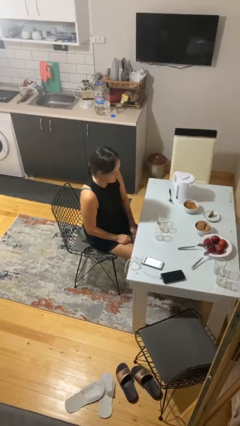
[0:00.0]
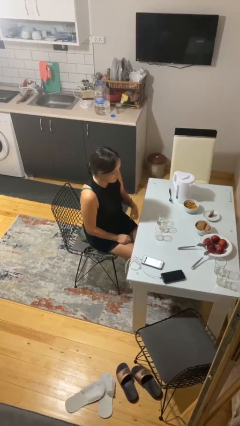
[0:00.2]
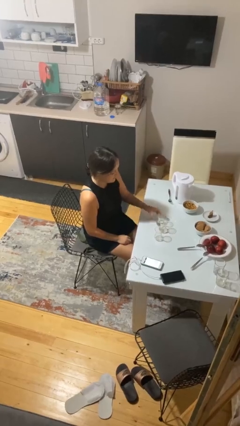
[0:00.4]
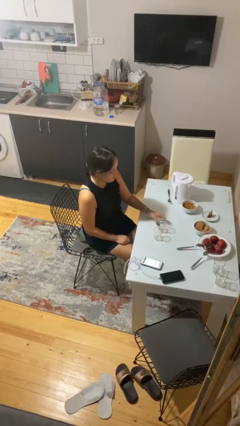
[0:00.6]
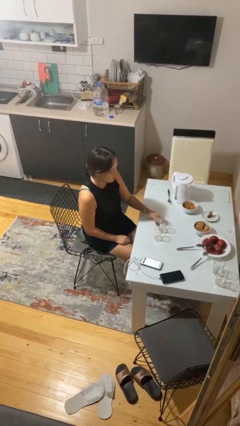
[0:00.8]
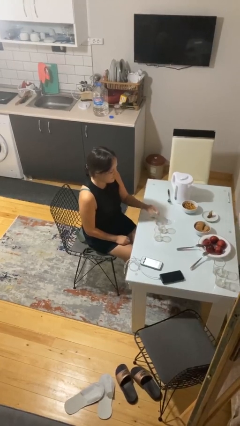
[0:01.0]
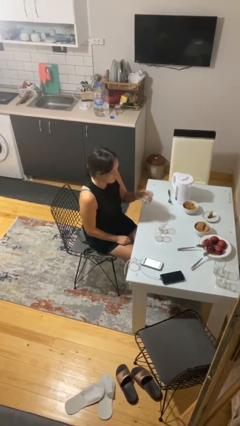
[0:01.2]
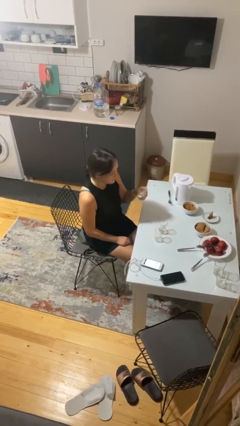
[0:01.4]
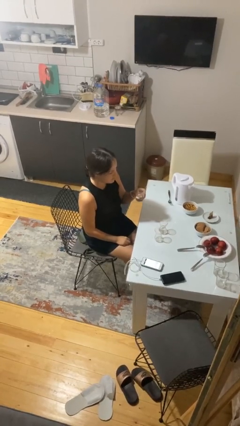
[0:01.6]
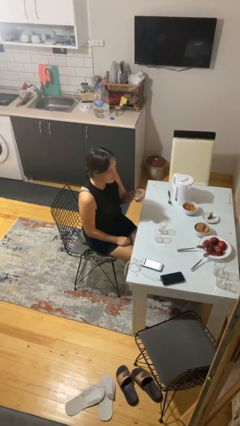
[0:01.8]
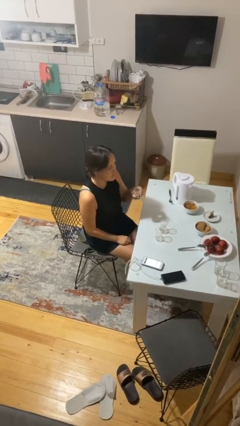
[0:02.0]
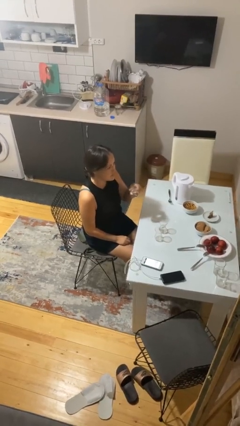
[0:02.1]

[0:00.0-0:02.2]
person picks up object from table

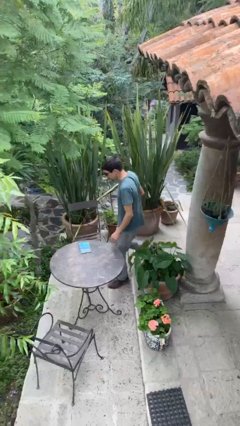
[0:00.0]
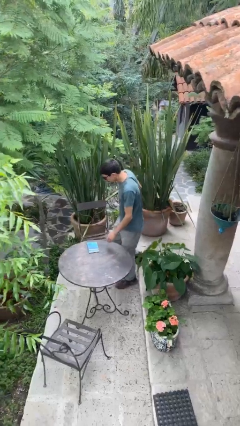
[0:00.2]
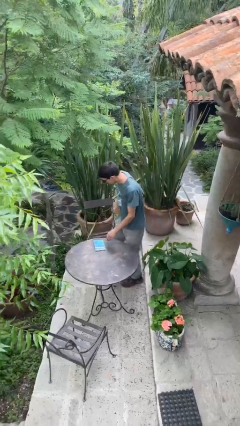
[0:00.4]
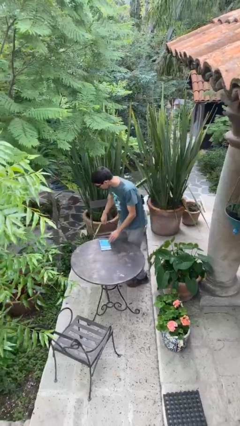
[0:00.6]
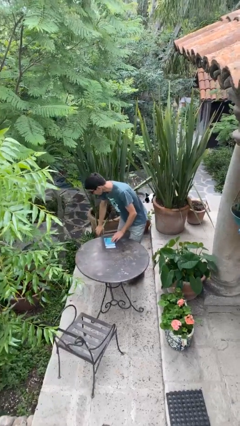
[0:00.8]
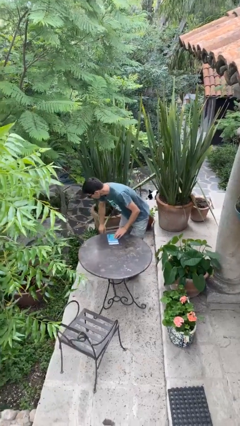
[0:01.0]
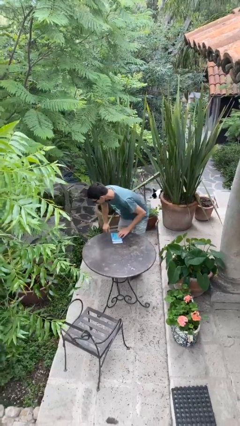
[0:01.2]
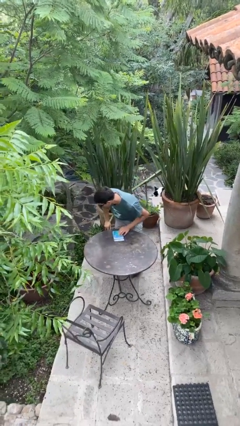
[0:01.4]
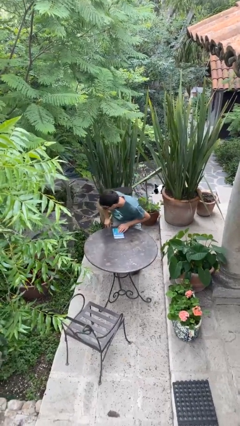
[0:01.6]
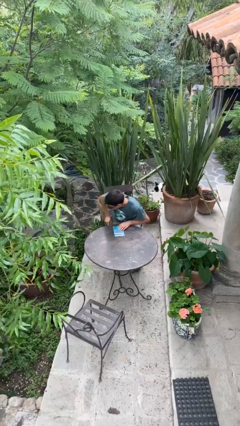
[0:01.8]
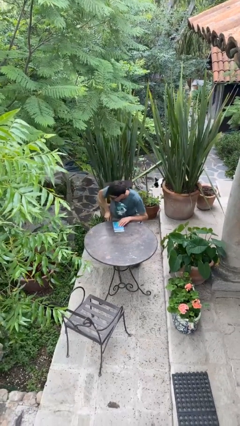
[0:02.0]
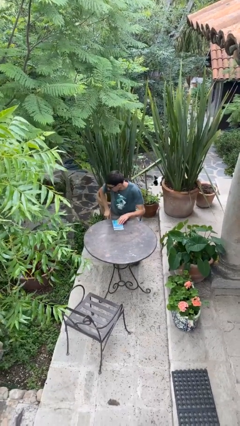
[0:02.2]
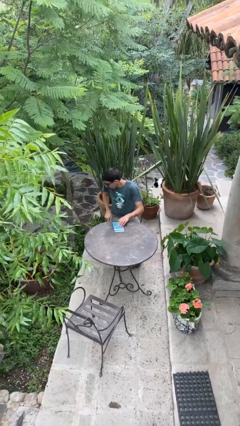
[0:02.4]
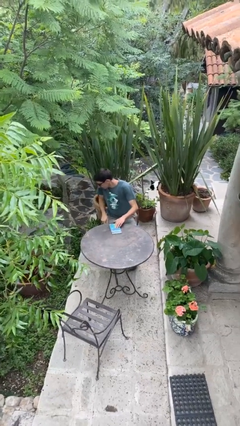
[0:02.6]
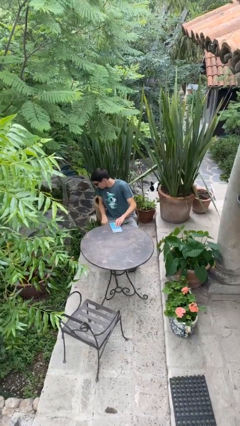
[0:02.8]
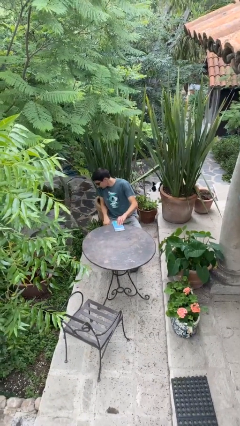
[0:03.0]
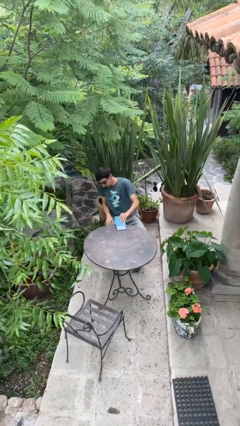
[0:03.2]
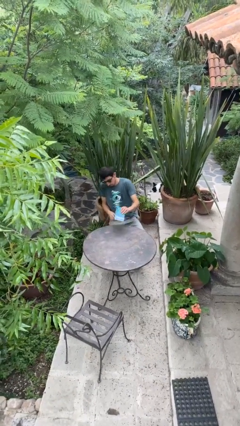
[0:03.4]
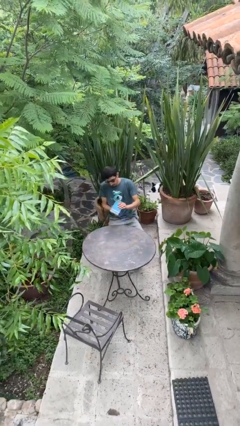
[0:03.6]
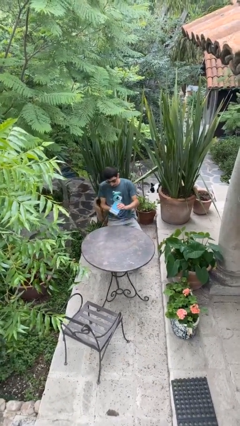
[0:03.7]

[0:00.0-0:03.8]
person sits down

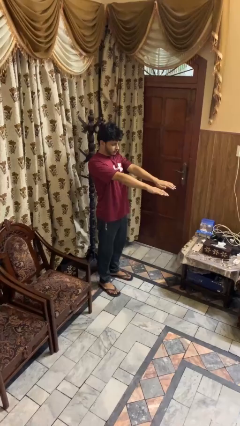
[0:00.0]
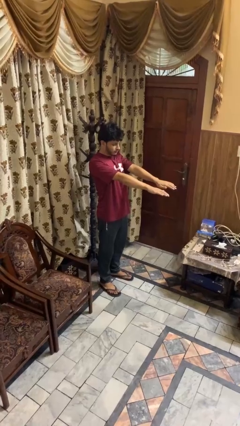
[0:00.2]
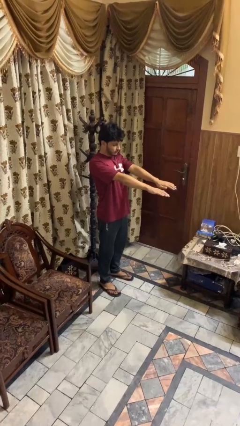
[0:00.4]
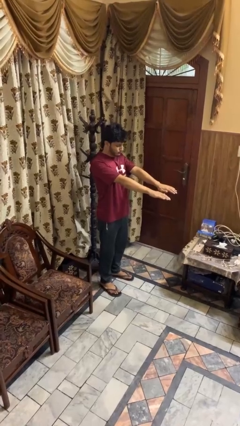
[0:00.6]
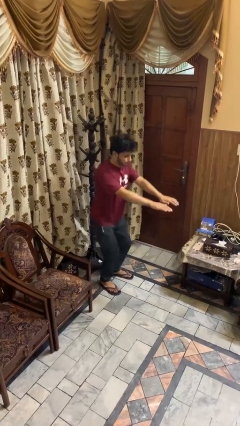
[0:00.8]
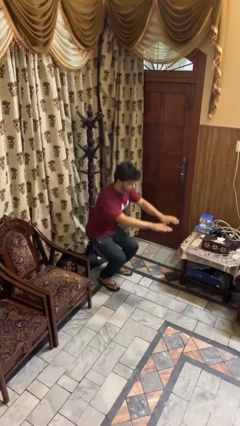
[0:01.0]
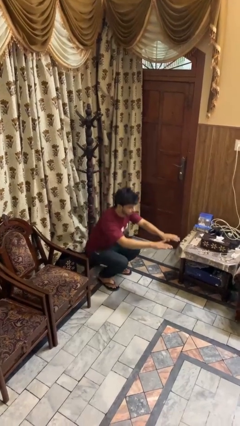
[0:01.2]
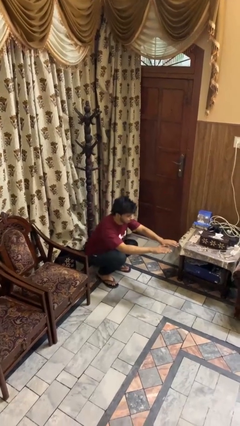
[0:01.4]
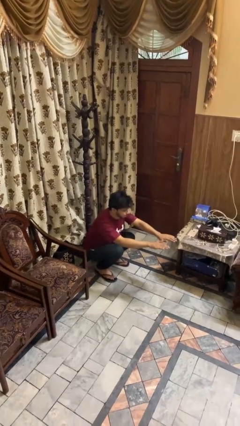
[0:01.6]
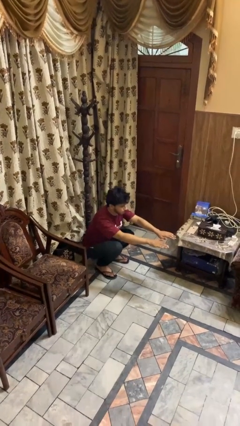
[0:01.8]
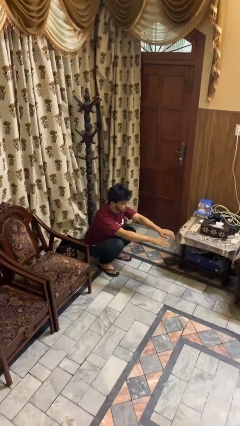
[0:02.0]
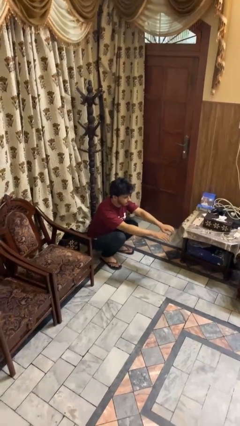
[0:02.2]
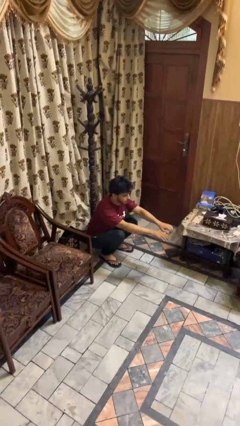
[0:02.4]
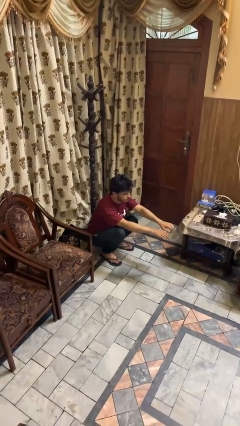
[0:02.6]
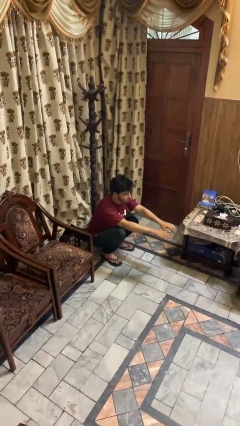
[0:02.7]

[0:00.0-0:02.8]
person squats

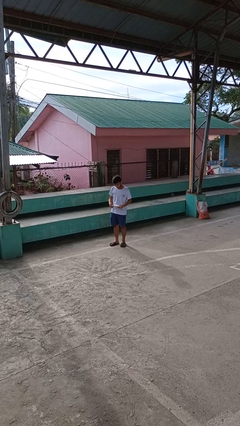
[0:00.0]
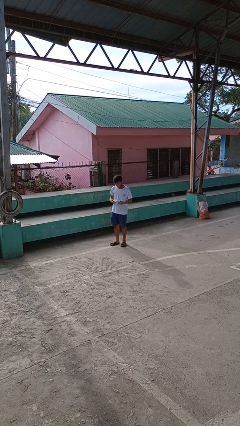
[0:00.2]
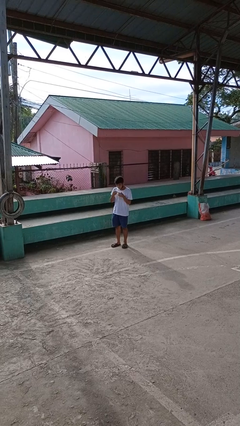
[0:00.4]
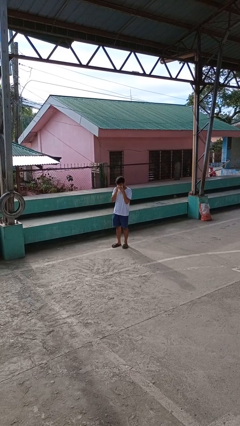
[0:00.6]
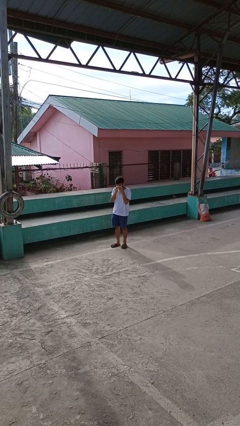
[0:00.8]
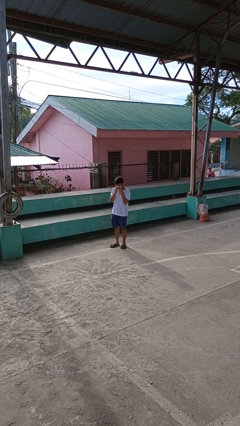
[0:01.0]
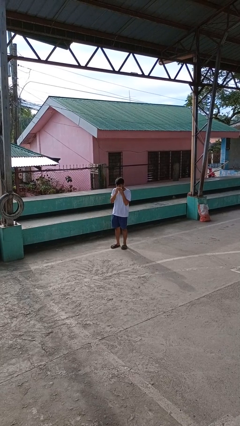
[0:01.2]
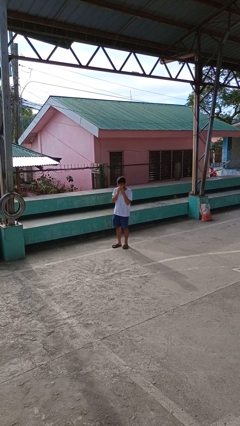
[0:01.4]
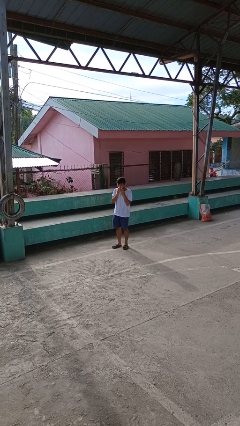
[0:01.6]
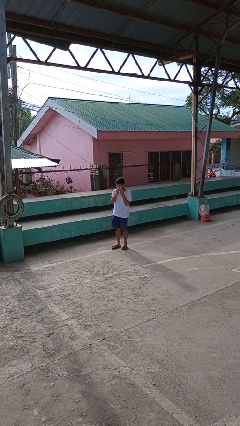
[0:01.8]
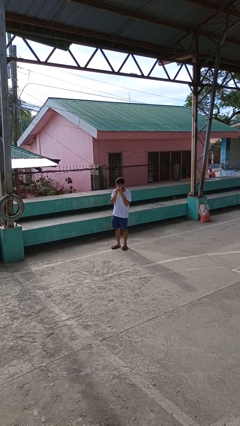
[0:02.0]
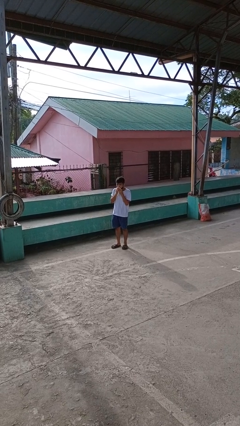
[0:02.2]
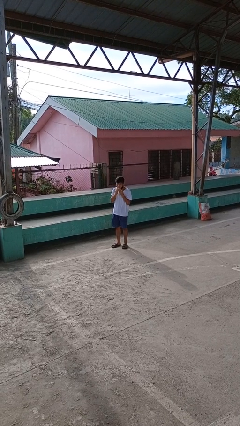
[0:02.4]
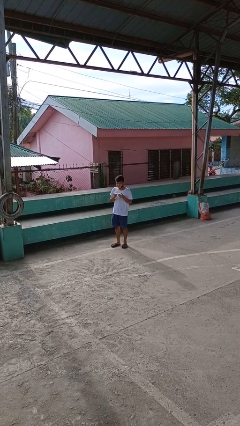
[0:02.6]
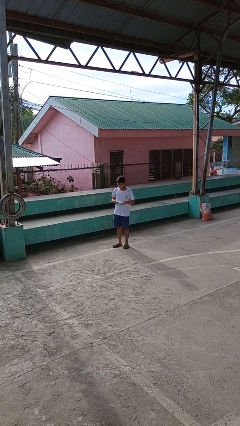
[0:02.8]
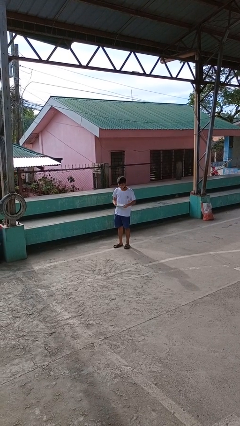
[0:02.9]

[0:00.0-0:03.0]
person wipes mouth with napkin

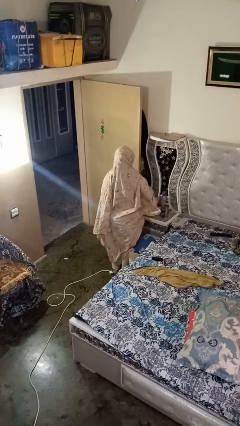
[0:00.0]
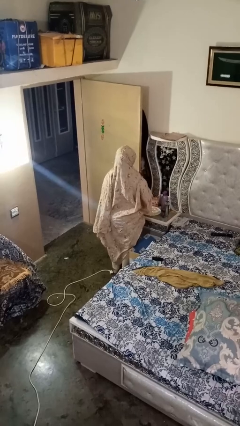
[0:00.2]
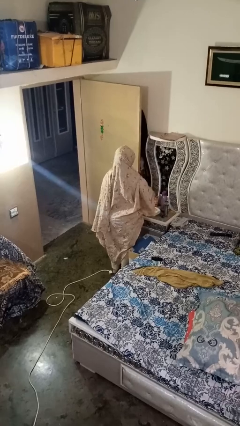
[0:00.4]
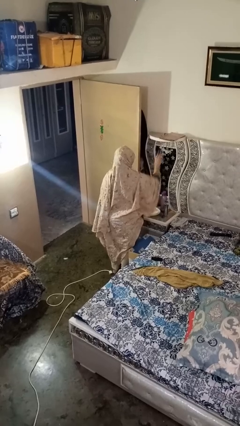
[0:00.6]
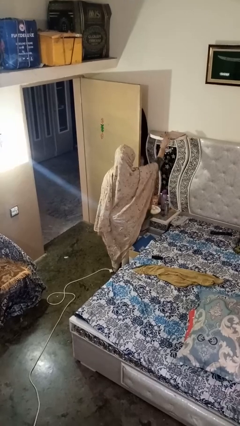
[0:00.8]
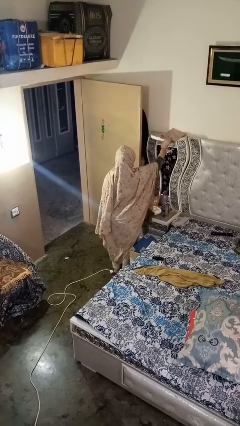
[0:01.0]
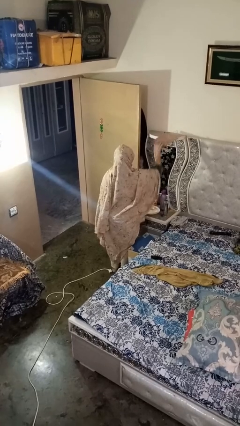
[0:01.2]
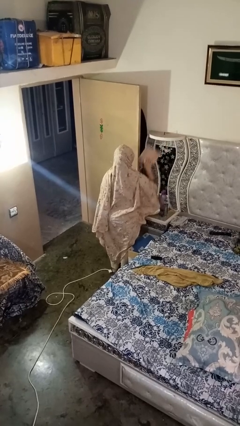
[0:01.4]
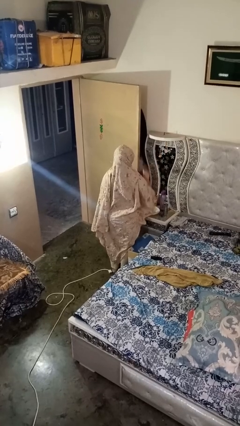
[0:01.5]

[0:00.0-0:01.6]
person picks up object from shelf

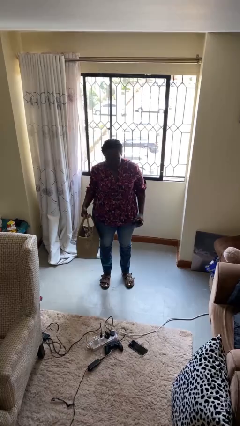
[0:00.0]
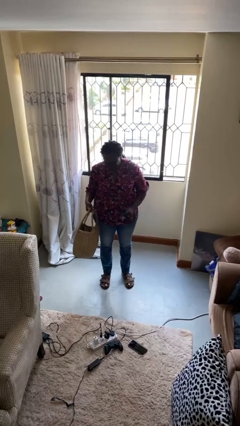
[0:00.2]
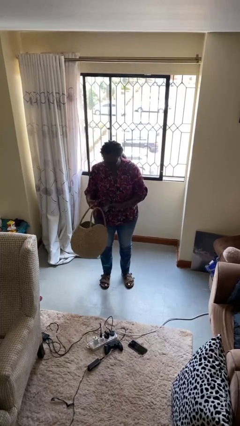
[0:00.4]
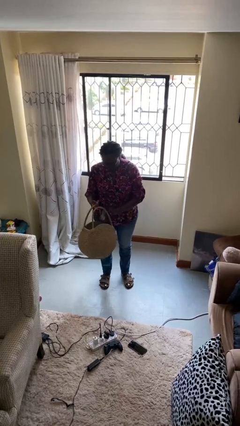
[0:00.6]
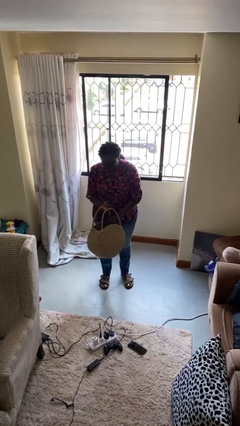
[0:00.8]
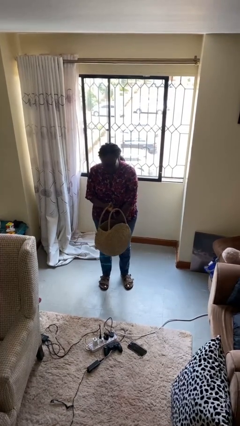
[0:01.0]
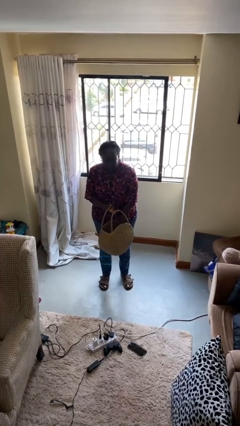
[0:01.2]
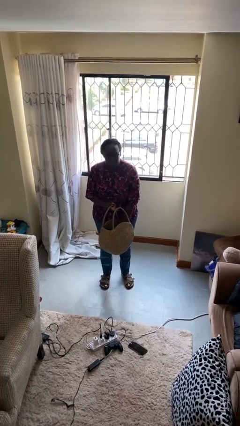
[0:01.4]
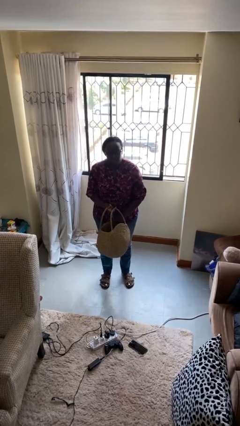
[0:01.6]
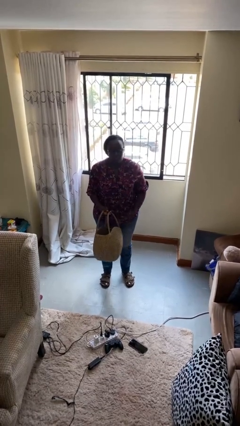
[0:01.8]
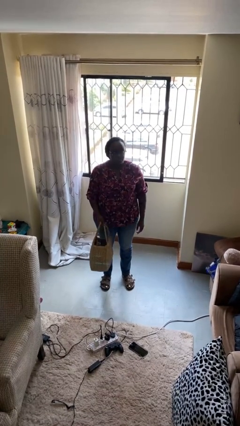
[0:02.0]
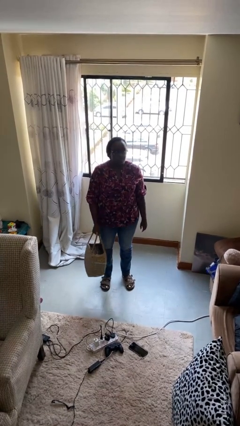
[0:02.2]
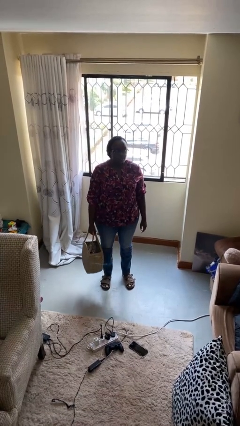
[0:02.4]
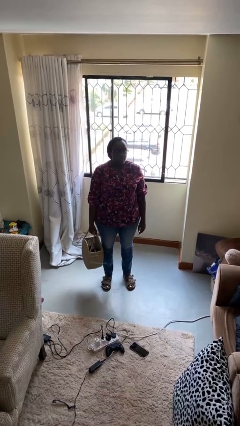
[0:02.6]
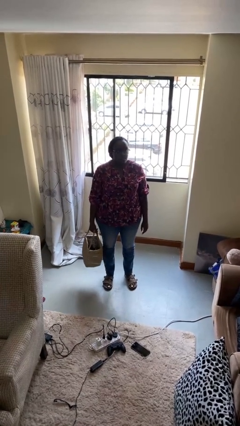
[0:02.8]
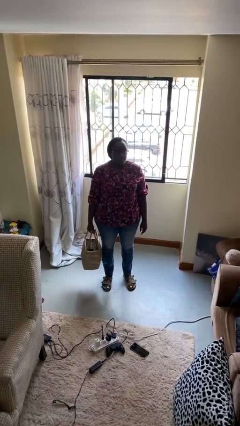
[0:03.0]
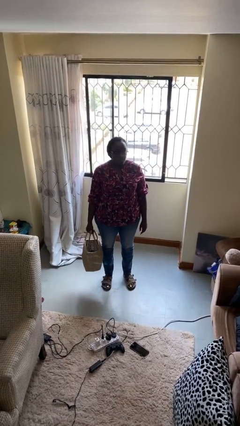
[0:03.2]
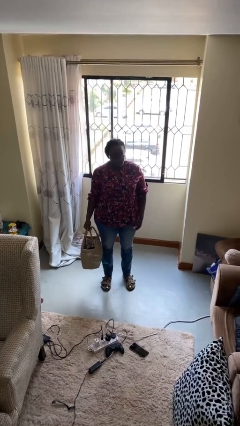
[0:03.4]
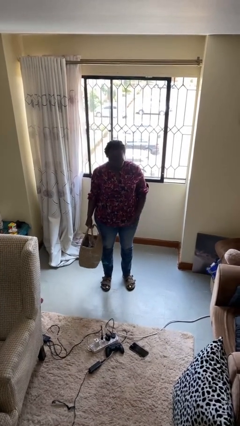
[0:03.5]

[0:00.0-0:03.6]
person puts object into basket

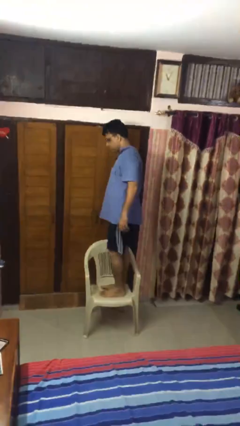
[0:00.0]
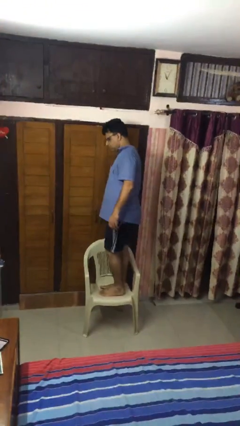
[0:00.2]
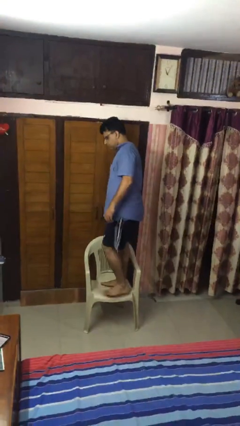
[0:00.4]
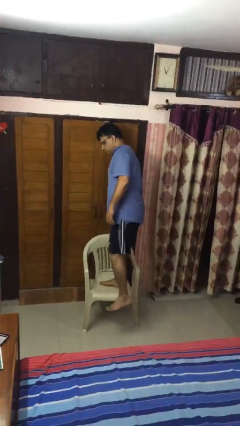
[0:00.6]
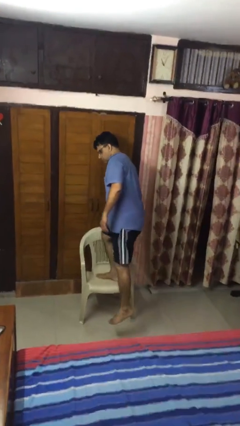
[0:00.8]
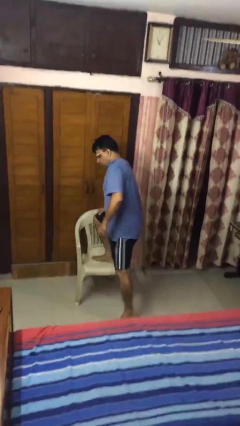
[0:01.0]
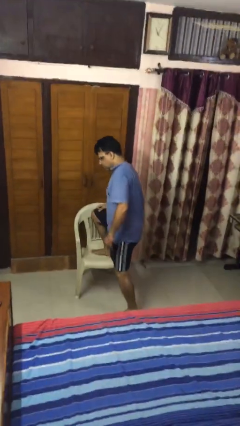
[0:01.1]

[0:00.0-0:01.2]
person climbs off chair
